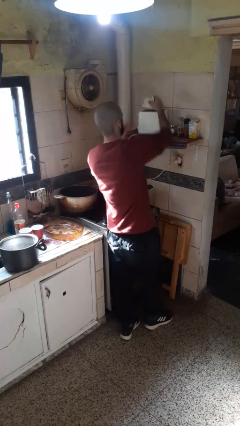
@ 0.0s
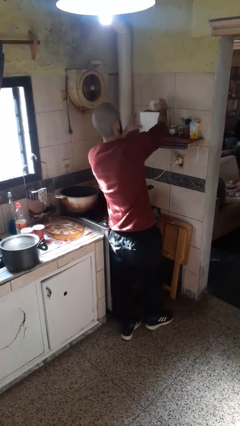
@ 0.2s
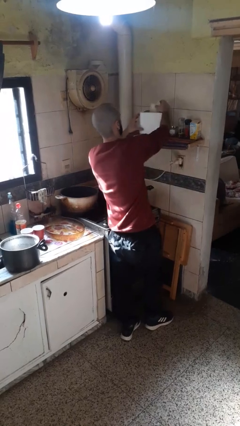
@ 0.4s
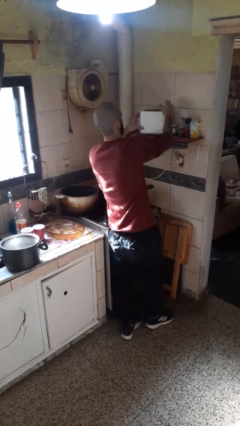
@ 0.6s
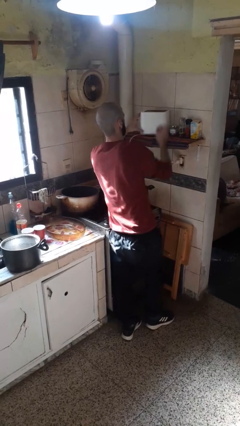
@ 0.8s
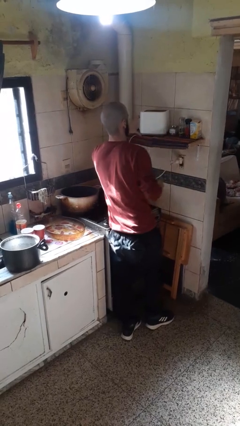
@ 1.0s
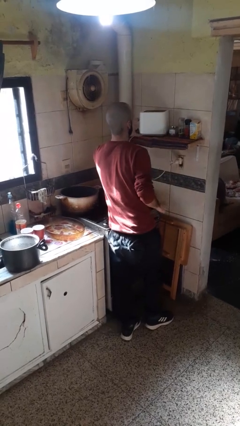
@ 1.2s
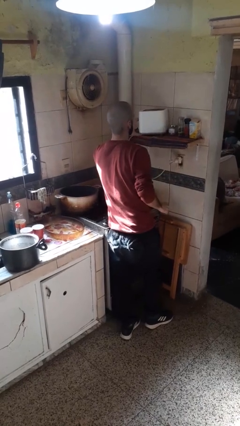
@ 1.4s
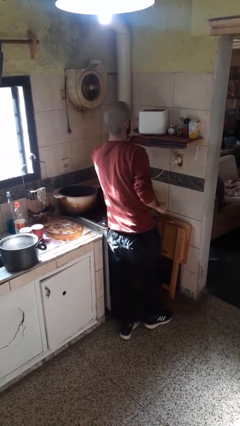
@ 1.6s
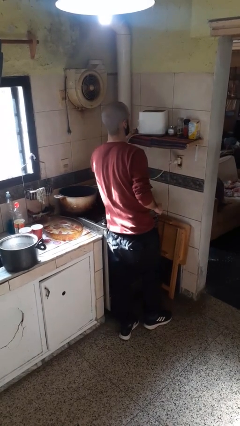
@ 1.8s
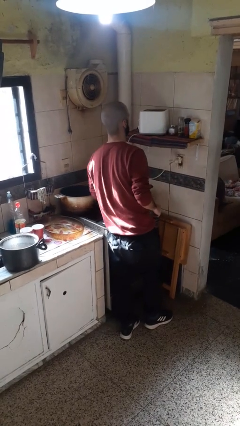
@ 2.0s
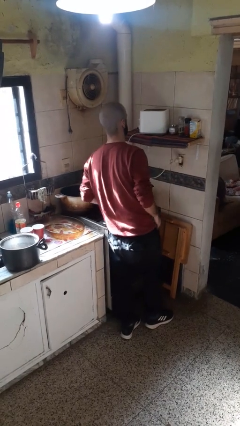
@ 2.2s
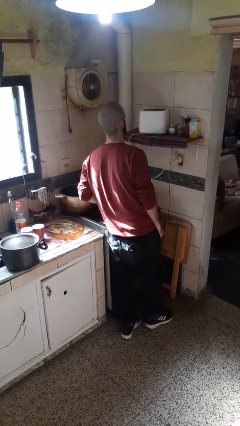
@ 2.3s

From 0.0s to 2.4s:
person puts object into toaster

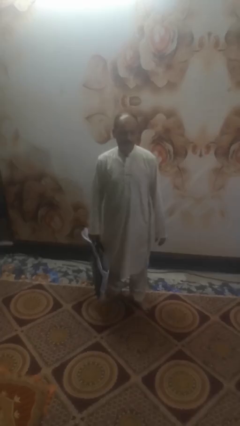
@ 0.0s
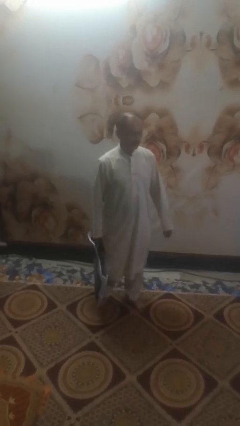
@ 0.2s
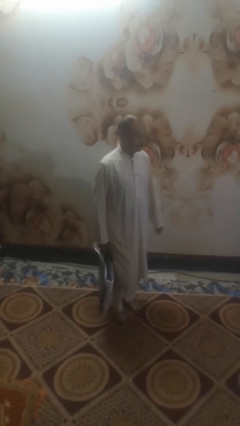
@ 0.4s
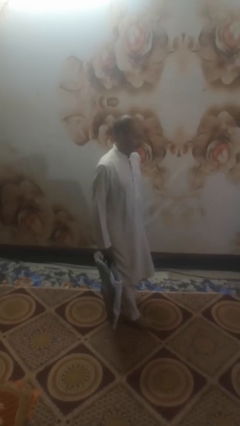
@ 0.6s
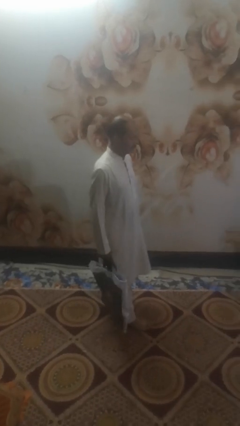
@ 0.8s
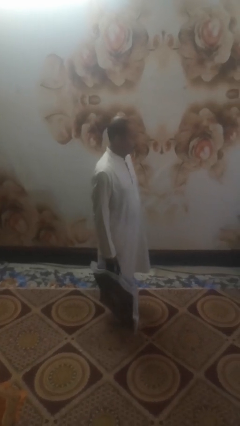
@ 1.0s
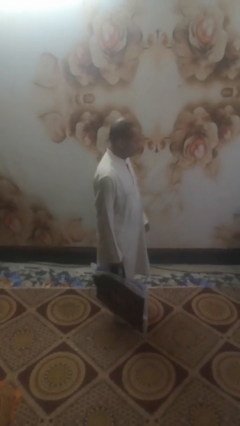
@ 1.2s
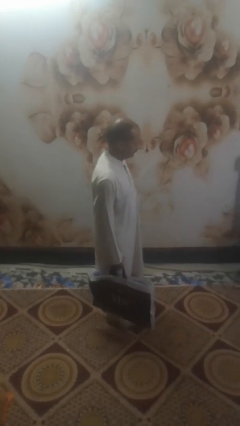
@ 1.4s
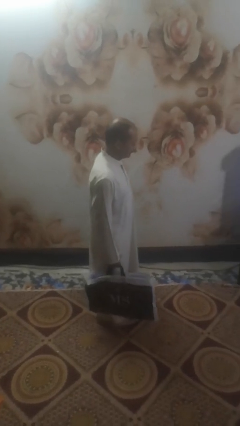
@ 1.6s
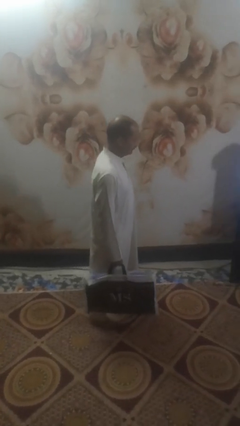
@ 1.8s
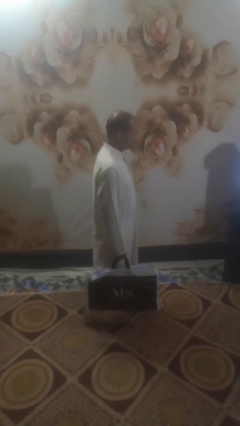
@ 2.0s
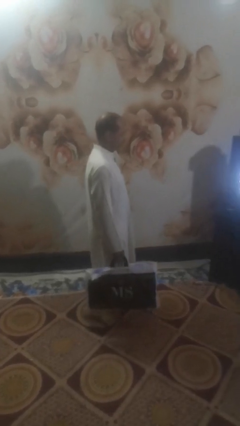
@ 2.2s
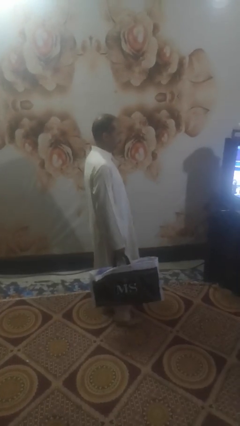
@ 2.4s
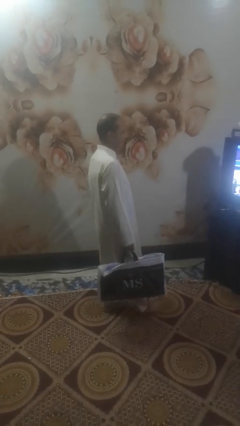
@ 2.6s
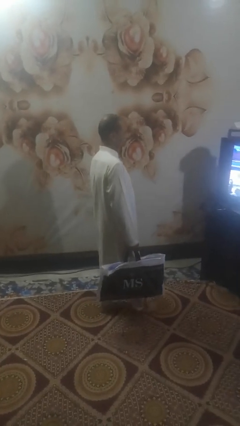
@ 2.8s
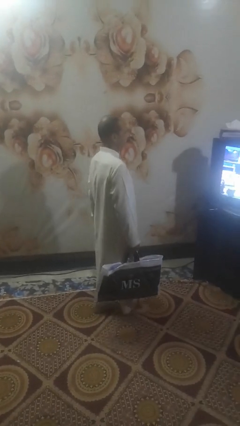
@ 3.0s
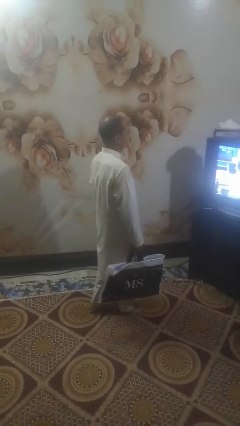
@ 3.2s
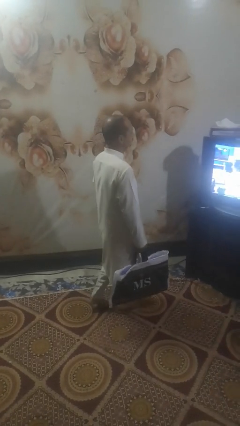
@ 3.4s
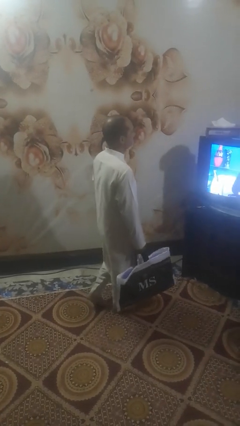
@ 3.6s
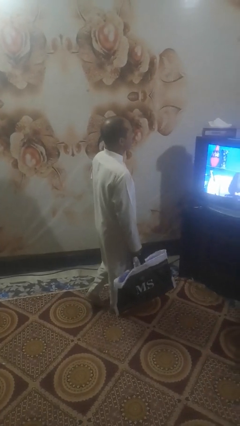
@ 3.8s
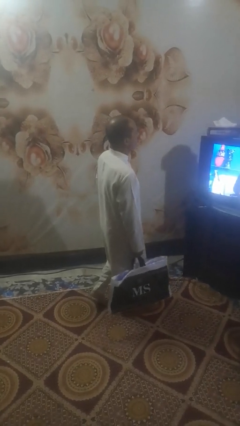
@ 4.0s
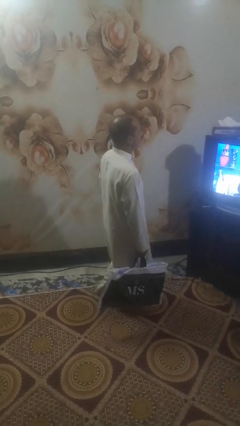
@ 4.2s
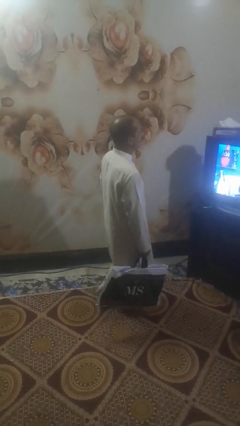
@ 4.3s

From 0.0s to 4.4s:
person carries groceries

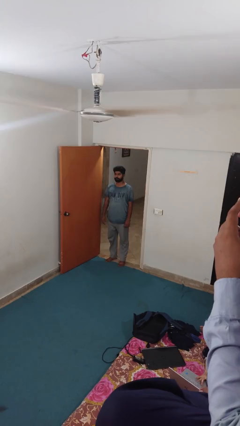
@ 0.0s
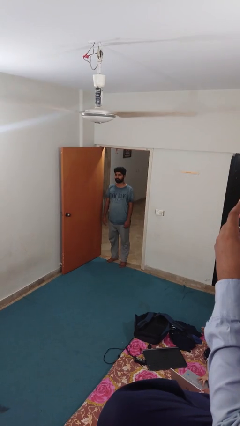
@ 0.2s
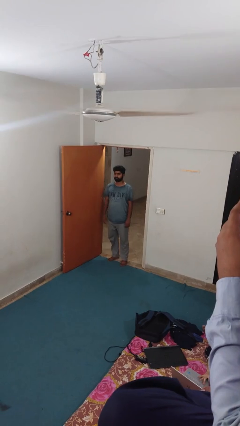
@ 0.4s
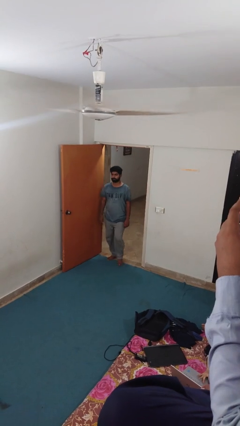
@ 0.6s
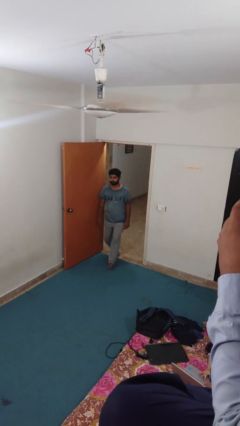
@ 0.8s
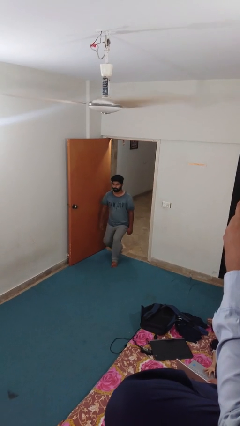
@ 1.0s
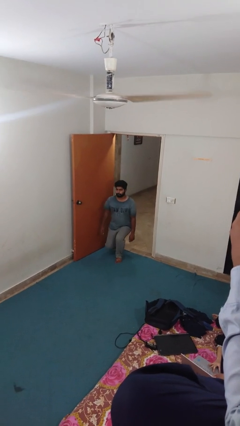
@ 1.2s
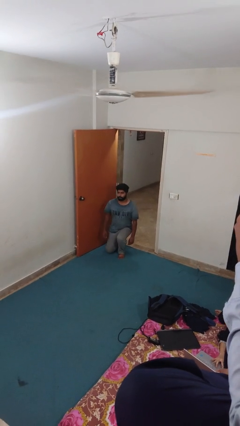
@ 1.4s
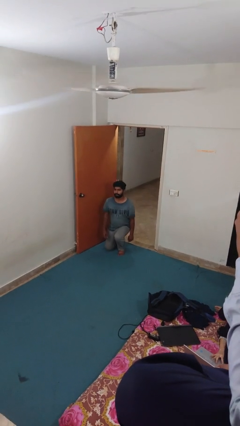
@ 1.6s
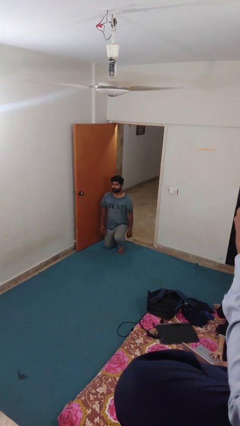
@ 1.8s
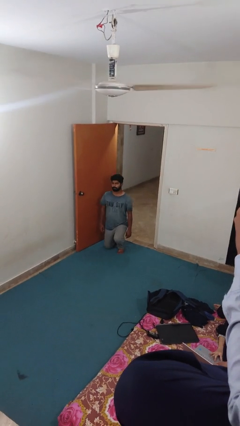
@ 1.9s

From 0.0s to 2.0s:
person kneels

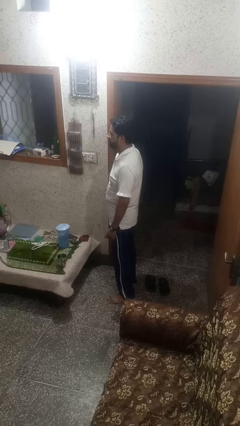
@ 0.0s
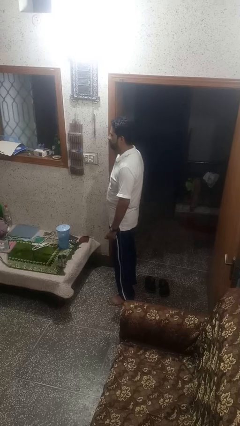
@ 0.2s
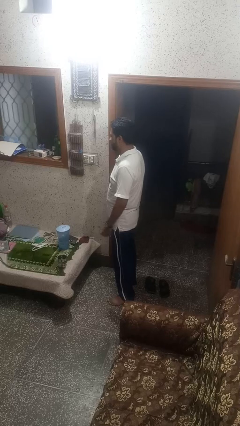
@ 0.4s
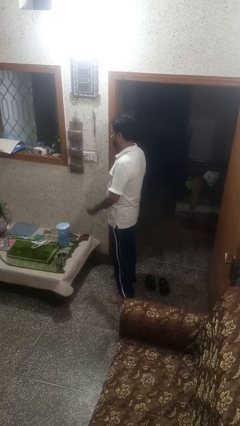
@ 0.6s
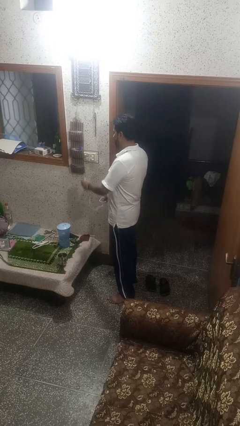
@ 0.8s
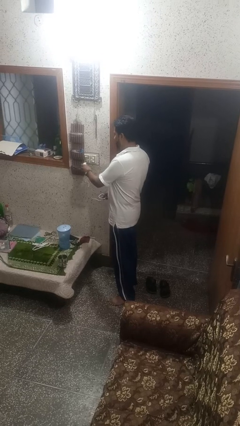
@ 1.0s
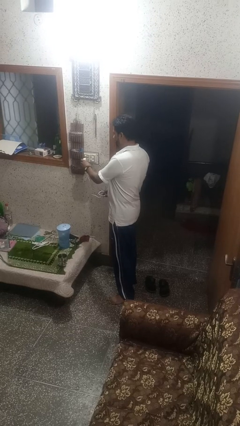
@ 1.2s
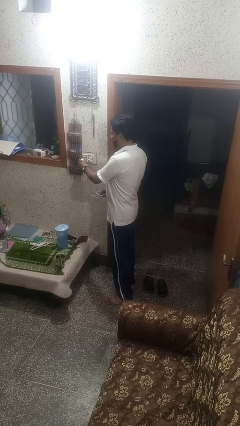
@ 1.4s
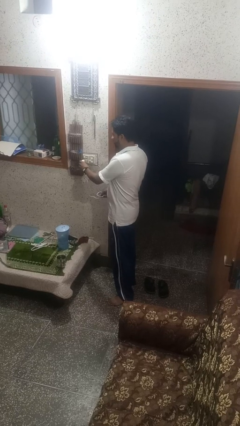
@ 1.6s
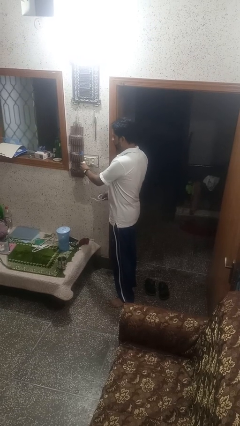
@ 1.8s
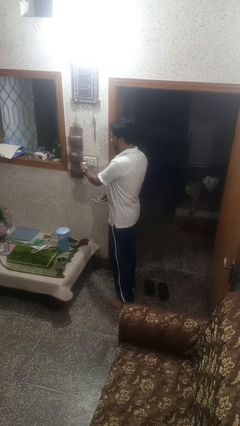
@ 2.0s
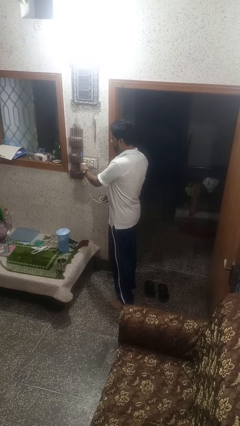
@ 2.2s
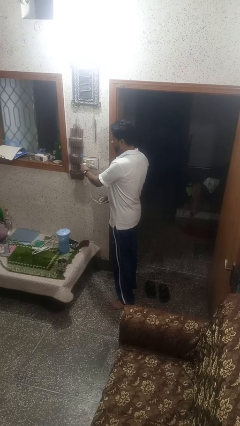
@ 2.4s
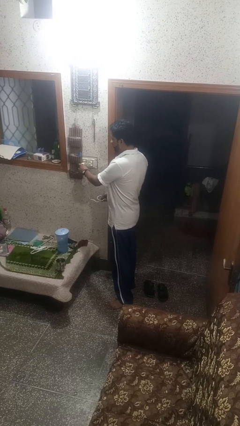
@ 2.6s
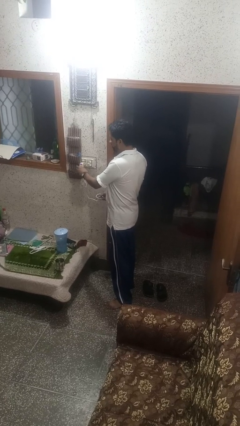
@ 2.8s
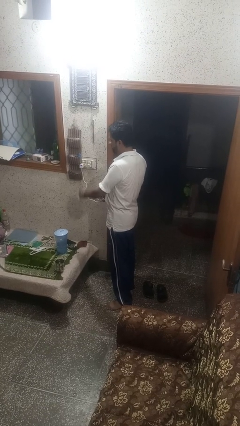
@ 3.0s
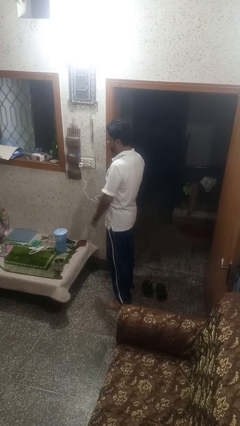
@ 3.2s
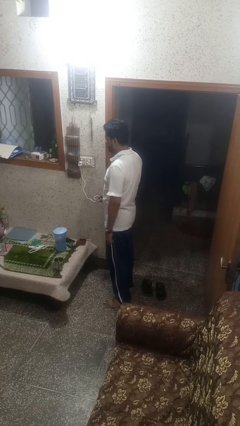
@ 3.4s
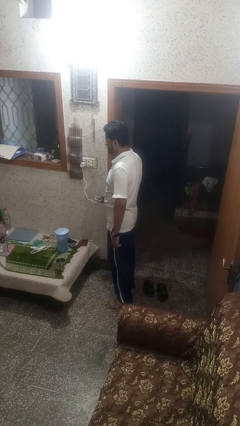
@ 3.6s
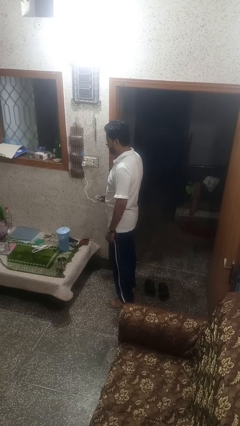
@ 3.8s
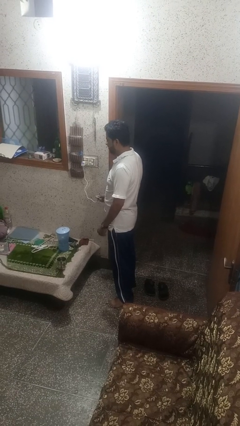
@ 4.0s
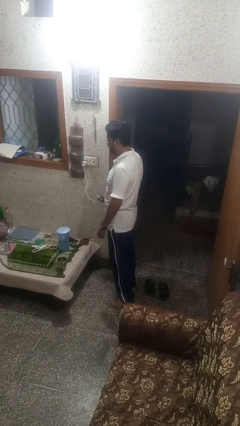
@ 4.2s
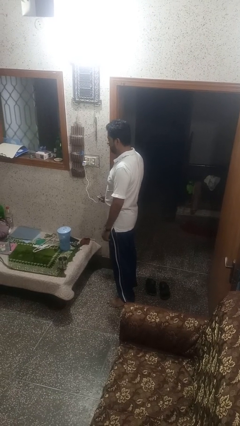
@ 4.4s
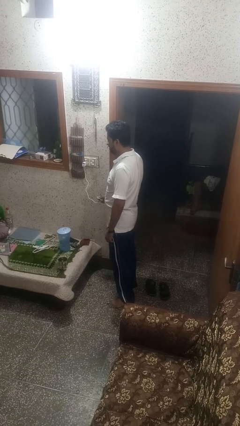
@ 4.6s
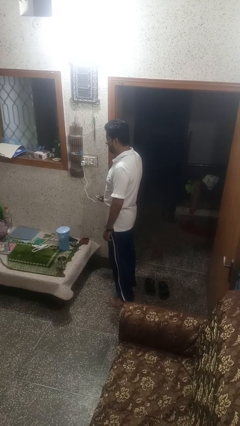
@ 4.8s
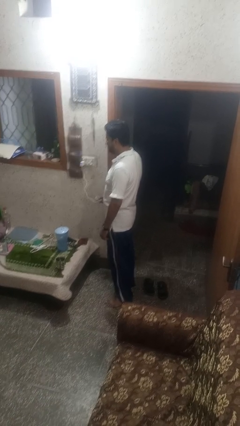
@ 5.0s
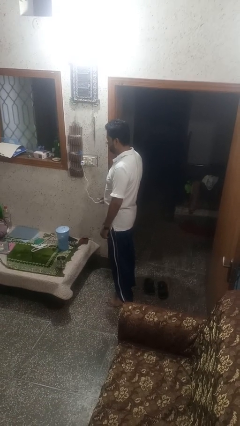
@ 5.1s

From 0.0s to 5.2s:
person plugs into electrical socket

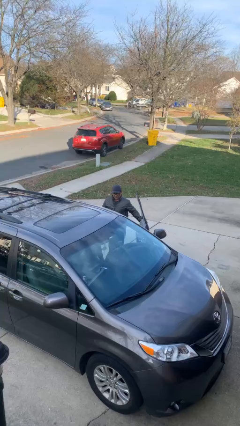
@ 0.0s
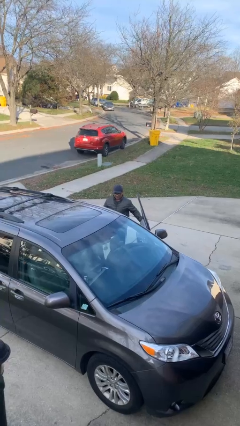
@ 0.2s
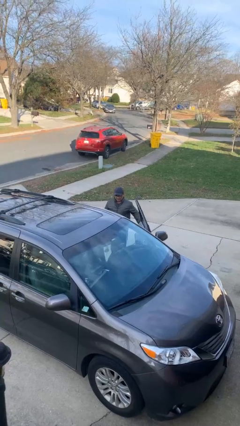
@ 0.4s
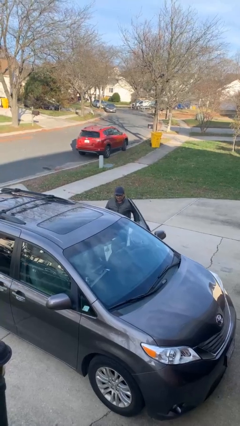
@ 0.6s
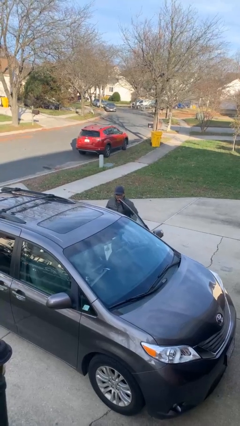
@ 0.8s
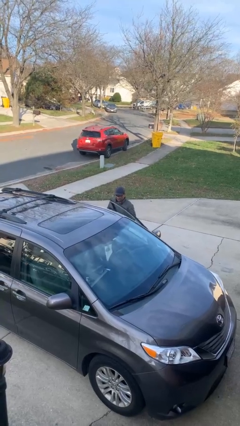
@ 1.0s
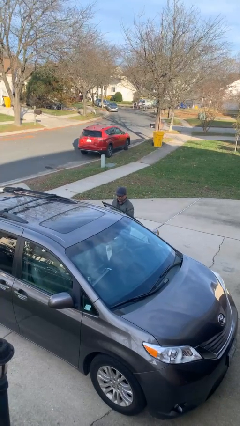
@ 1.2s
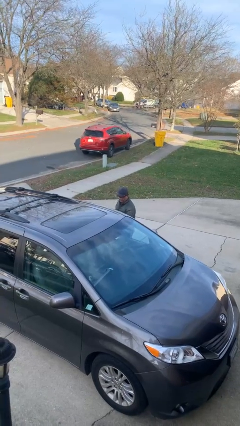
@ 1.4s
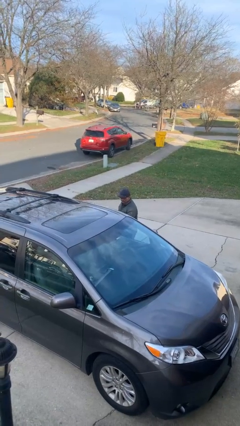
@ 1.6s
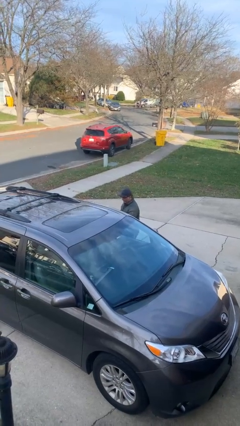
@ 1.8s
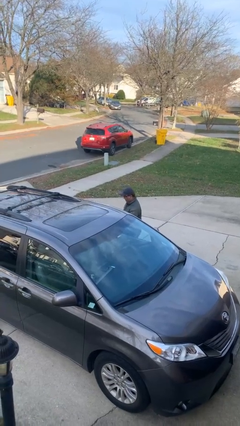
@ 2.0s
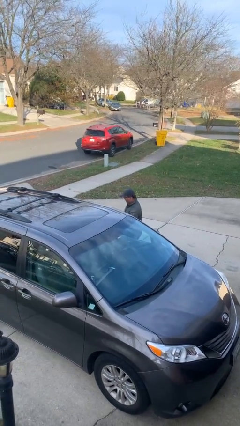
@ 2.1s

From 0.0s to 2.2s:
person closes car door

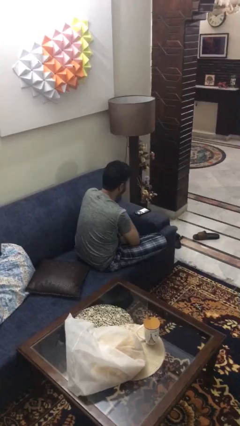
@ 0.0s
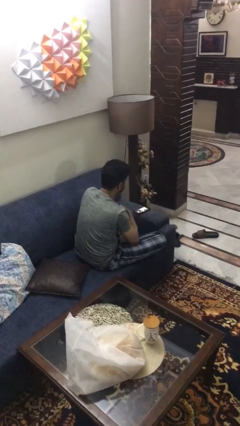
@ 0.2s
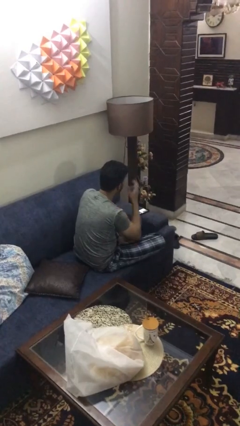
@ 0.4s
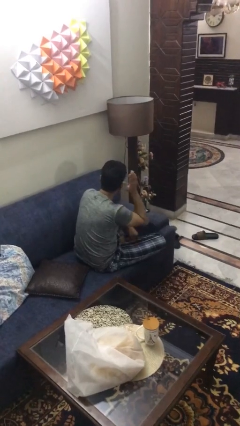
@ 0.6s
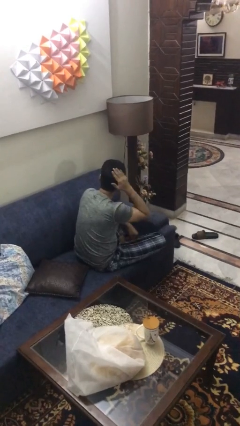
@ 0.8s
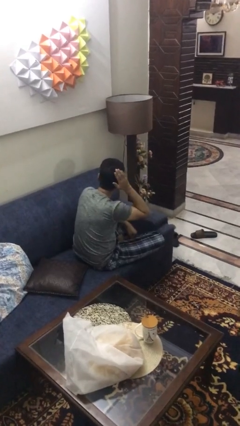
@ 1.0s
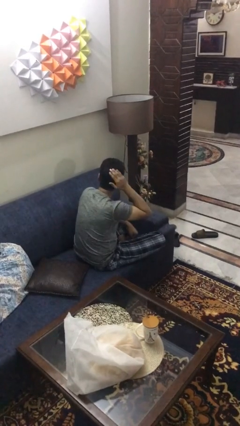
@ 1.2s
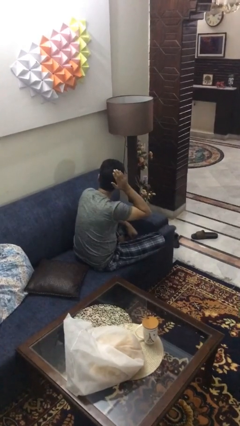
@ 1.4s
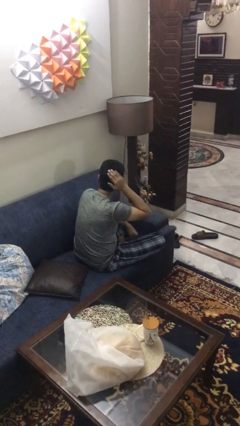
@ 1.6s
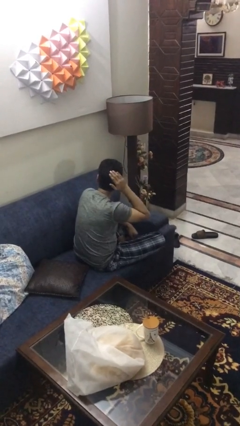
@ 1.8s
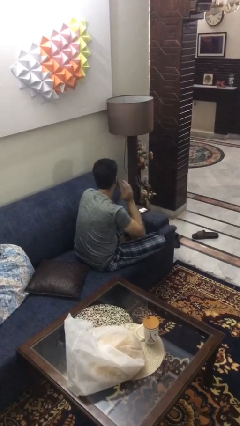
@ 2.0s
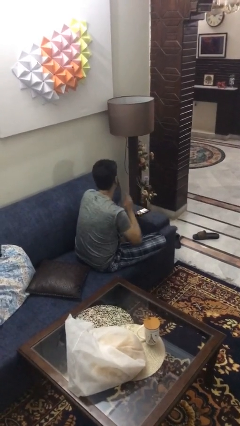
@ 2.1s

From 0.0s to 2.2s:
person strokes hair
